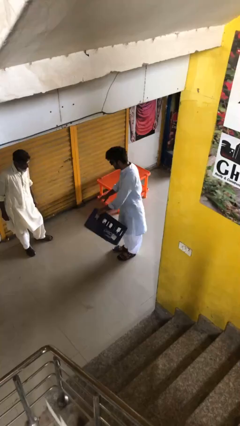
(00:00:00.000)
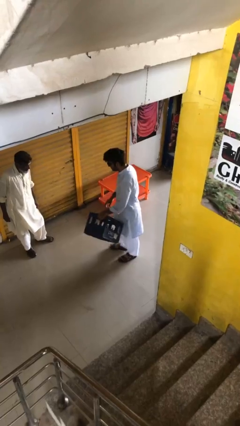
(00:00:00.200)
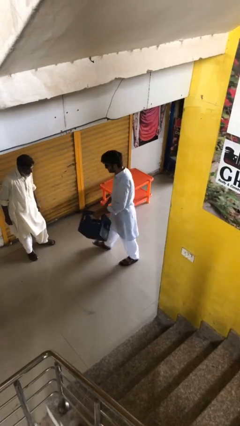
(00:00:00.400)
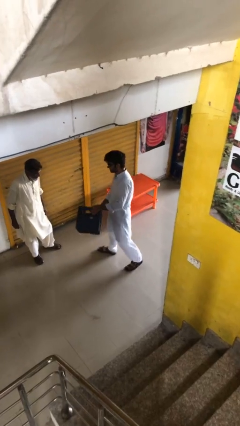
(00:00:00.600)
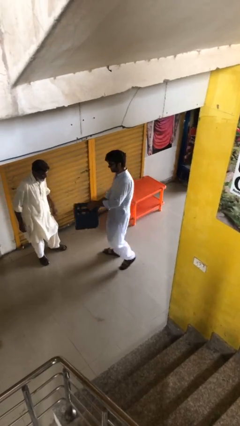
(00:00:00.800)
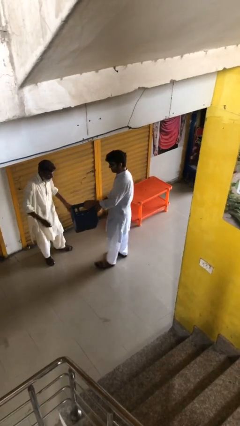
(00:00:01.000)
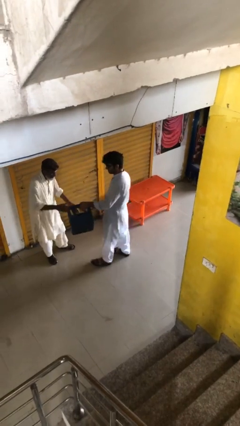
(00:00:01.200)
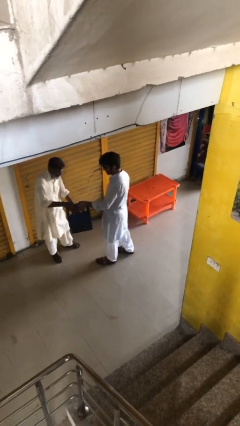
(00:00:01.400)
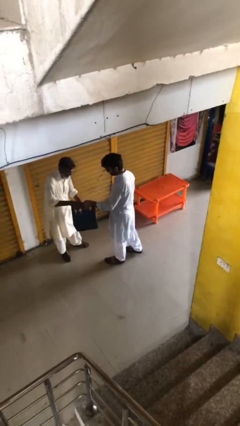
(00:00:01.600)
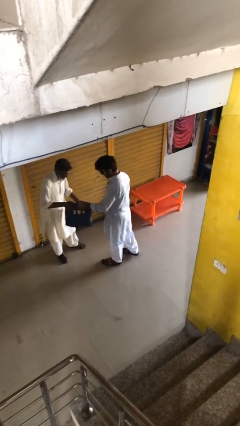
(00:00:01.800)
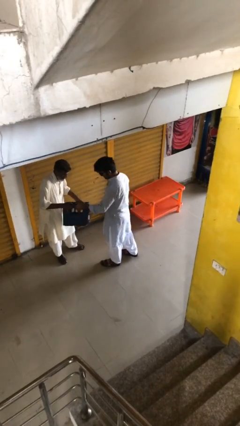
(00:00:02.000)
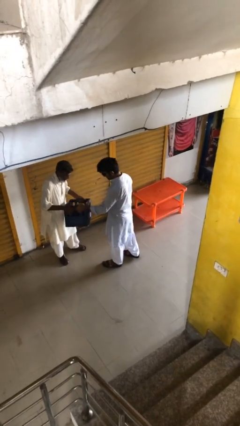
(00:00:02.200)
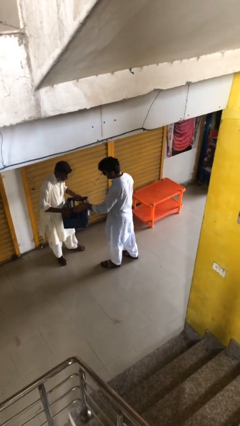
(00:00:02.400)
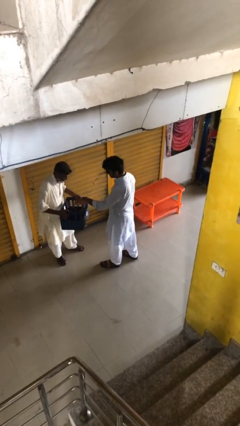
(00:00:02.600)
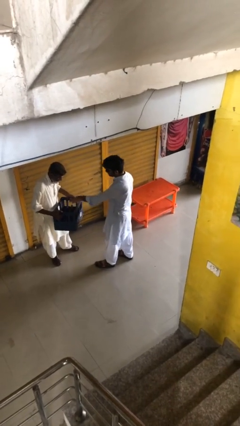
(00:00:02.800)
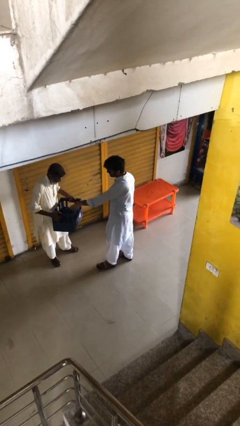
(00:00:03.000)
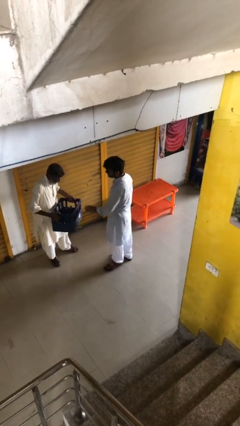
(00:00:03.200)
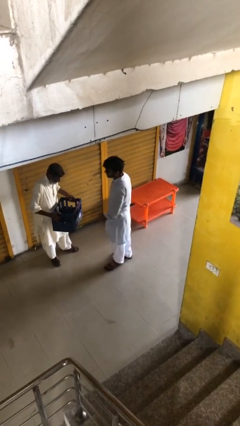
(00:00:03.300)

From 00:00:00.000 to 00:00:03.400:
person transfers object to person

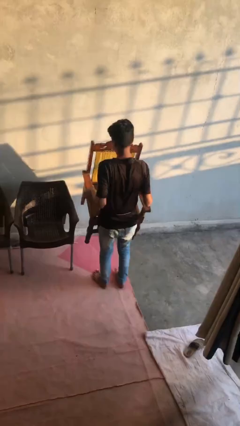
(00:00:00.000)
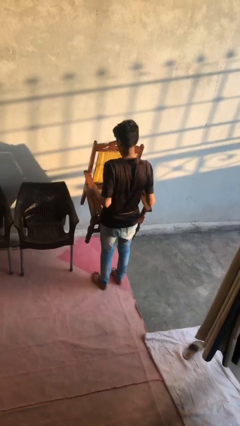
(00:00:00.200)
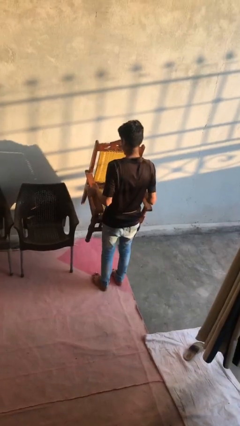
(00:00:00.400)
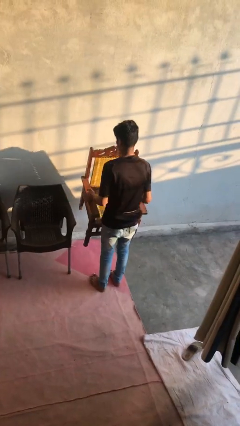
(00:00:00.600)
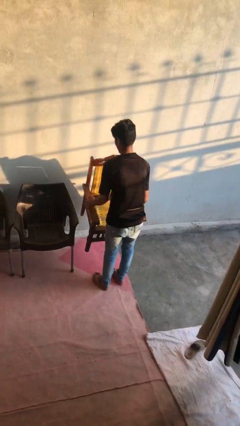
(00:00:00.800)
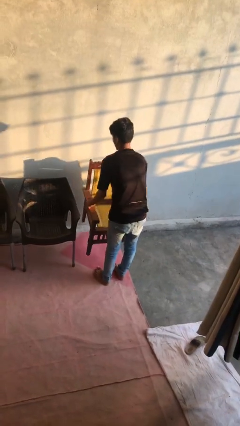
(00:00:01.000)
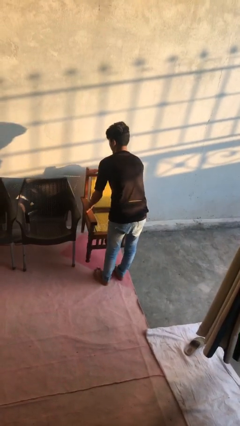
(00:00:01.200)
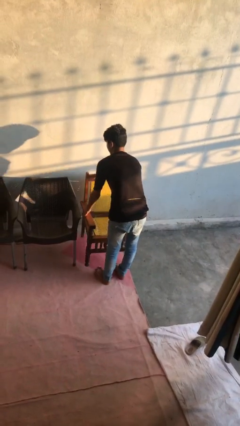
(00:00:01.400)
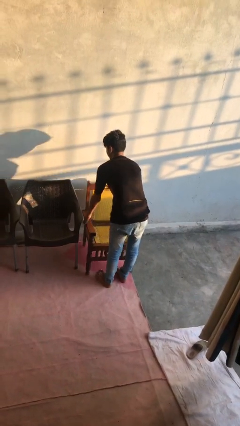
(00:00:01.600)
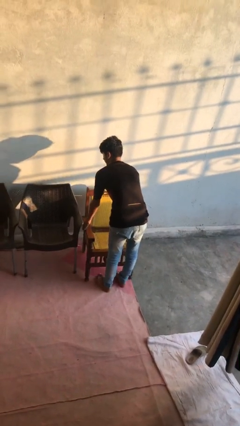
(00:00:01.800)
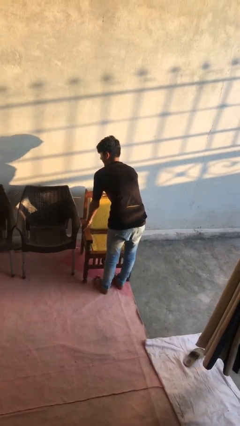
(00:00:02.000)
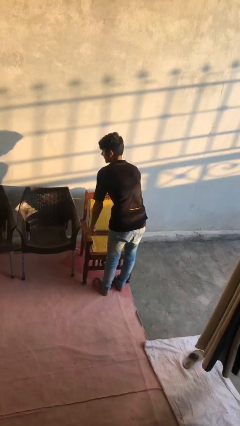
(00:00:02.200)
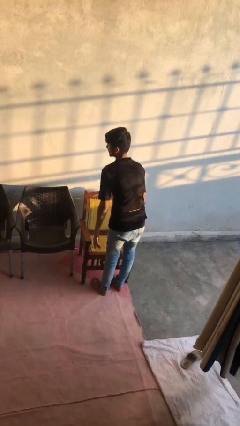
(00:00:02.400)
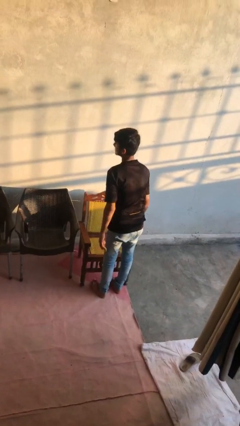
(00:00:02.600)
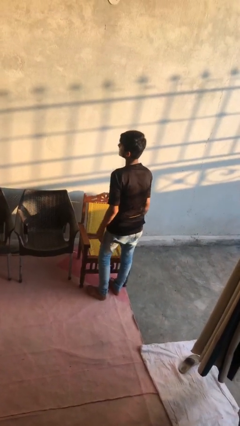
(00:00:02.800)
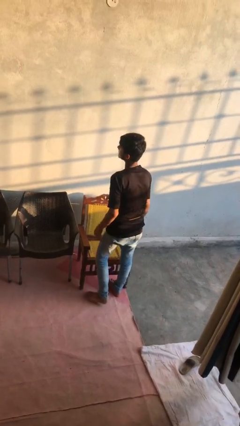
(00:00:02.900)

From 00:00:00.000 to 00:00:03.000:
person puts down object on floor

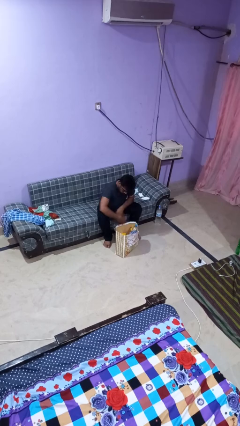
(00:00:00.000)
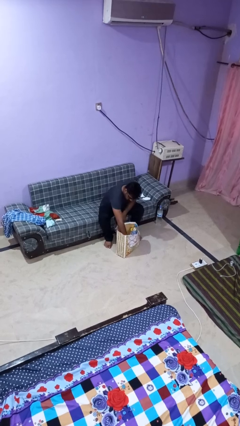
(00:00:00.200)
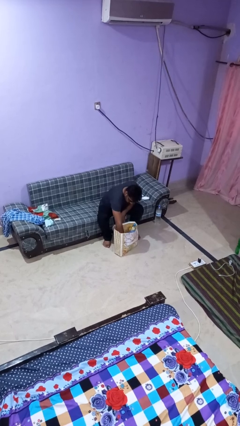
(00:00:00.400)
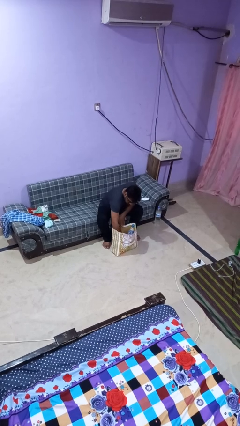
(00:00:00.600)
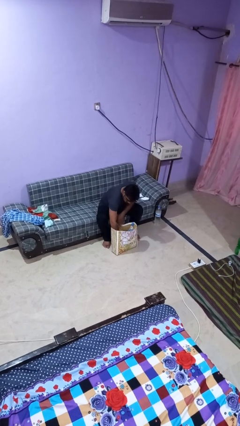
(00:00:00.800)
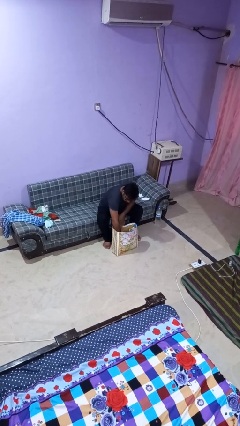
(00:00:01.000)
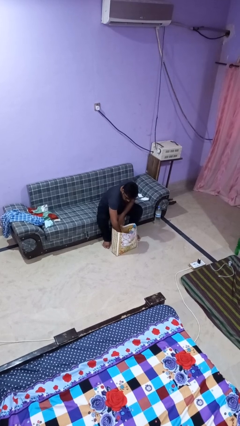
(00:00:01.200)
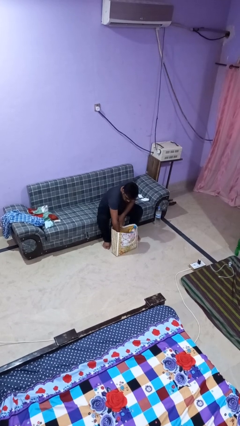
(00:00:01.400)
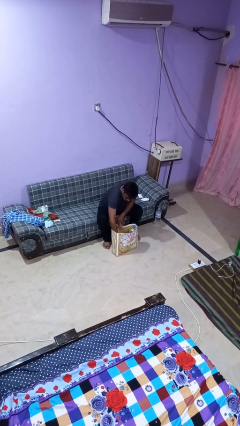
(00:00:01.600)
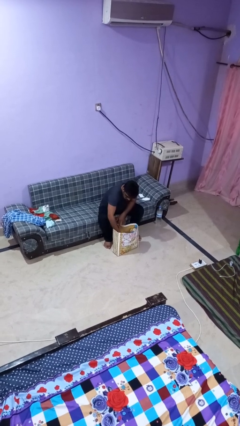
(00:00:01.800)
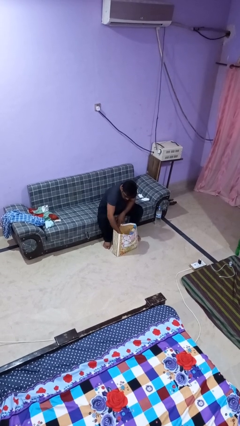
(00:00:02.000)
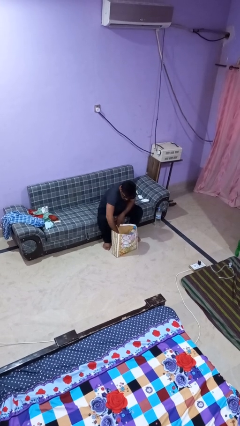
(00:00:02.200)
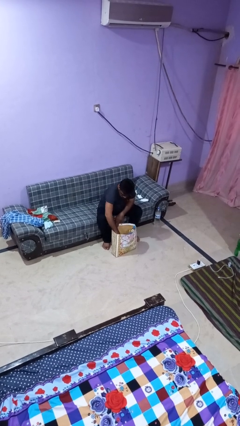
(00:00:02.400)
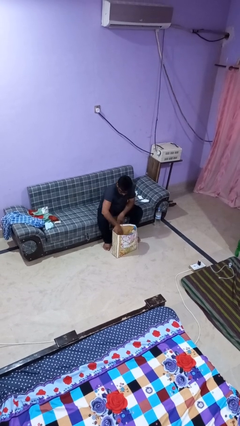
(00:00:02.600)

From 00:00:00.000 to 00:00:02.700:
person searches in bag

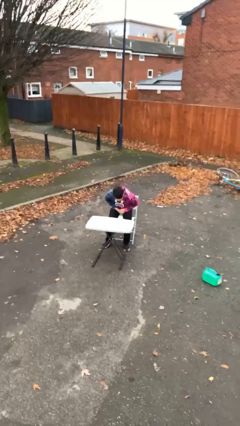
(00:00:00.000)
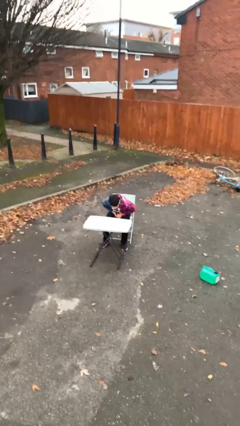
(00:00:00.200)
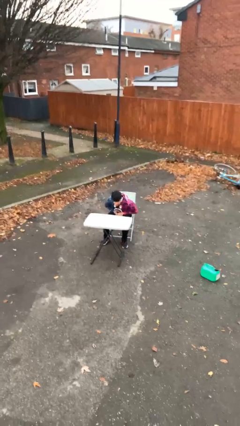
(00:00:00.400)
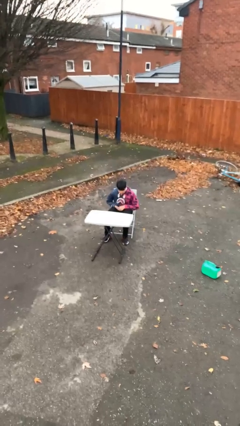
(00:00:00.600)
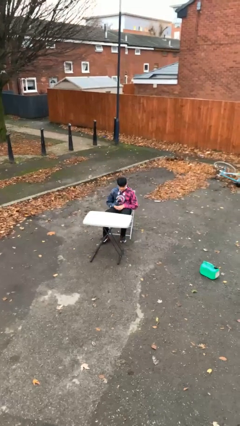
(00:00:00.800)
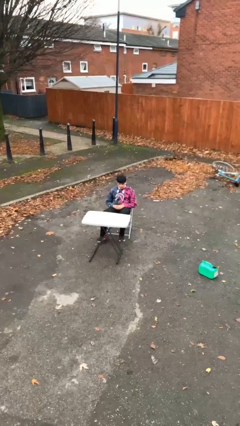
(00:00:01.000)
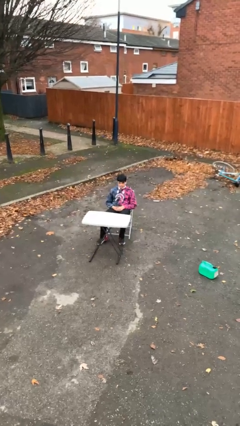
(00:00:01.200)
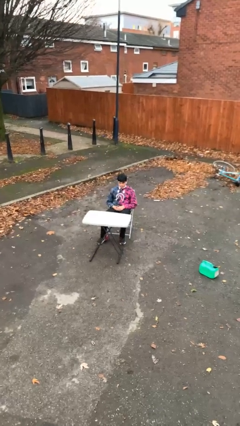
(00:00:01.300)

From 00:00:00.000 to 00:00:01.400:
person sits down

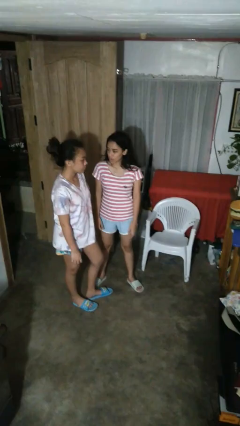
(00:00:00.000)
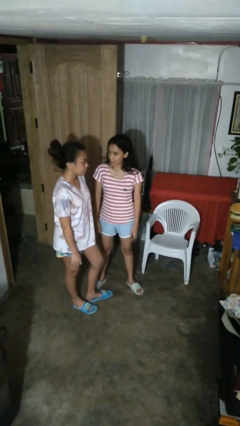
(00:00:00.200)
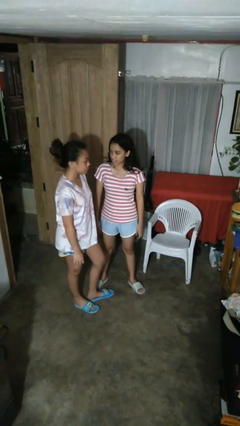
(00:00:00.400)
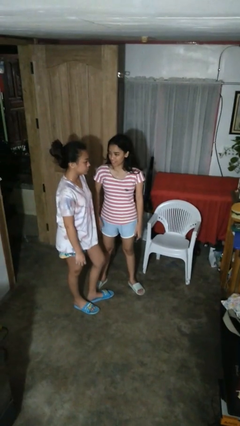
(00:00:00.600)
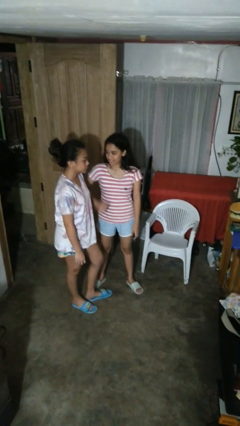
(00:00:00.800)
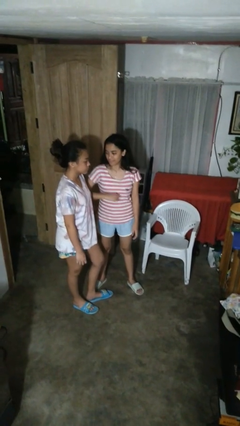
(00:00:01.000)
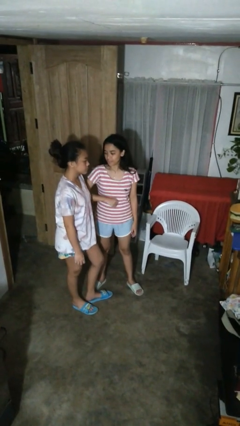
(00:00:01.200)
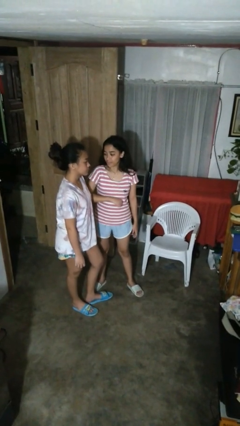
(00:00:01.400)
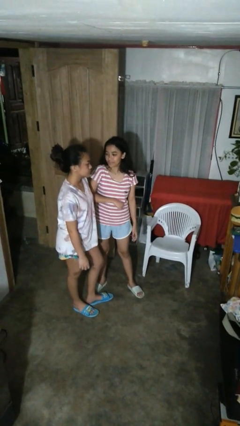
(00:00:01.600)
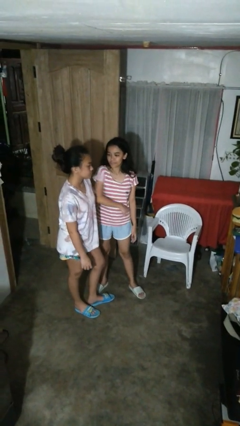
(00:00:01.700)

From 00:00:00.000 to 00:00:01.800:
person nudges person with elbow

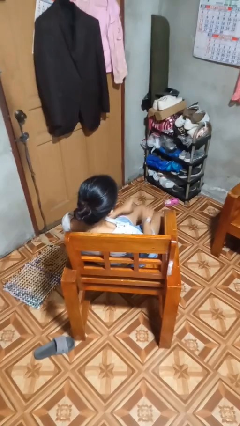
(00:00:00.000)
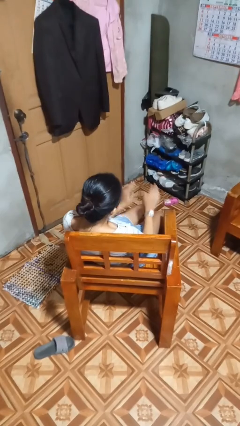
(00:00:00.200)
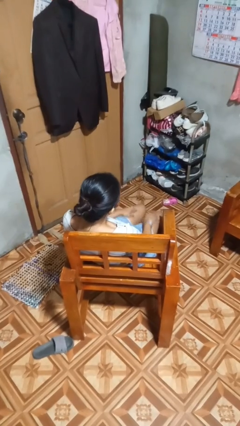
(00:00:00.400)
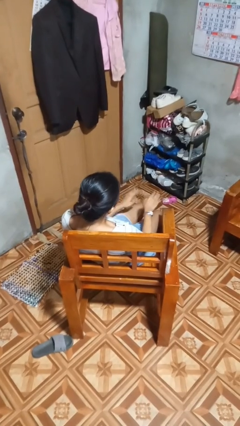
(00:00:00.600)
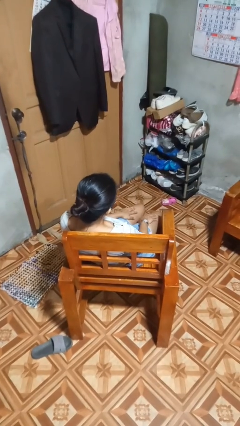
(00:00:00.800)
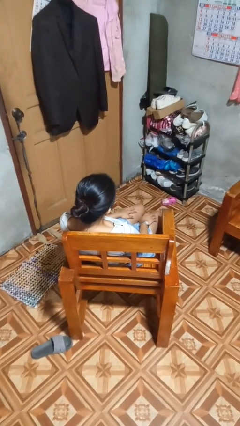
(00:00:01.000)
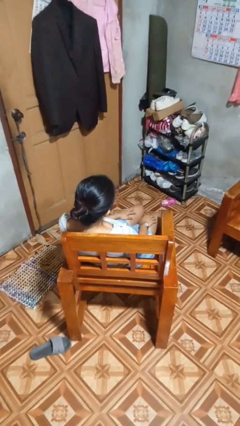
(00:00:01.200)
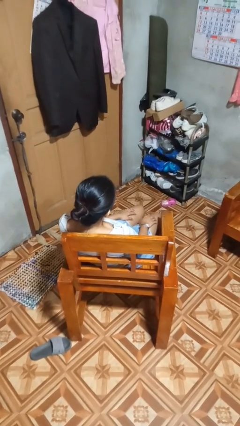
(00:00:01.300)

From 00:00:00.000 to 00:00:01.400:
person slaps hands on thighs

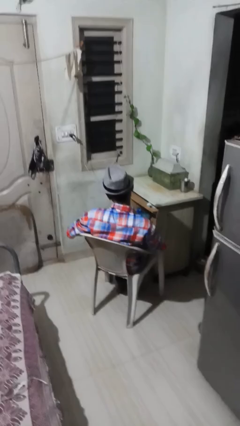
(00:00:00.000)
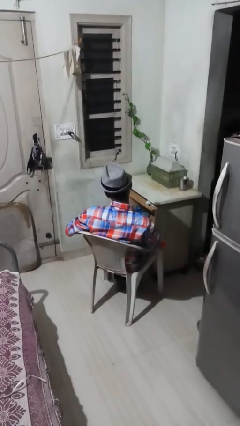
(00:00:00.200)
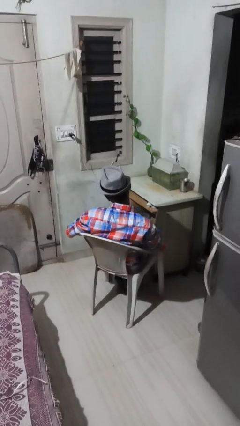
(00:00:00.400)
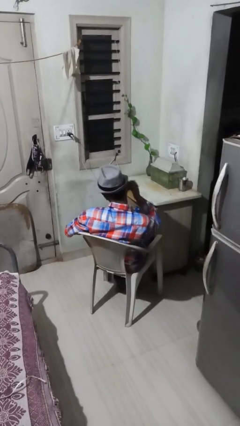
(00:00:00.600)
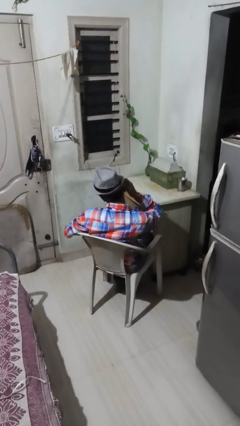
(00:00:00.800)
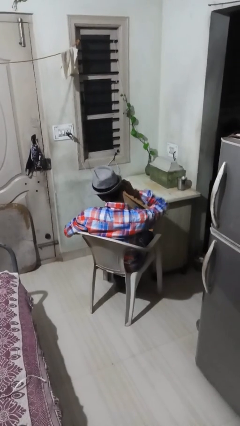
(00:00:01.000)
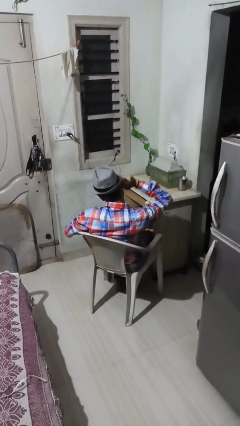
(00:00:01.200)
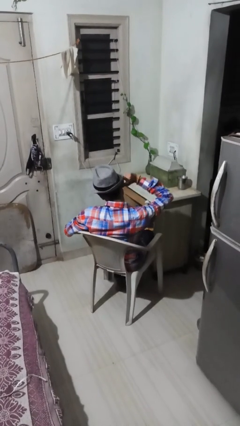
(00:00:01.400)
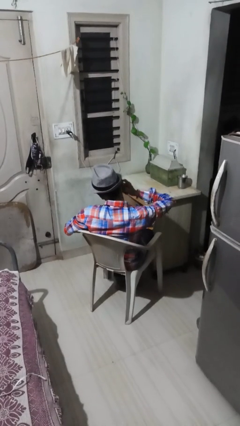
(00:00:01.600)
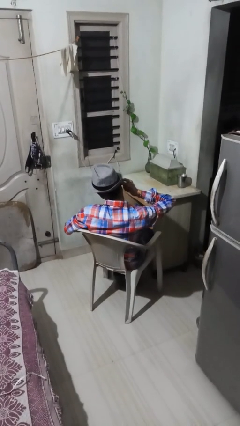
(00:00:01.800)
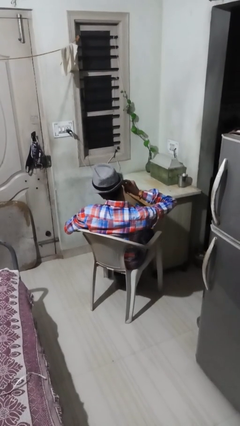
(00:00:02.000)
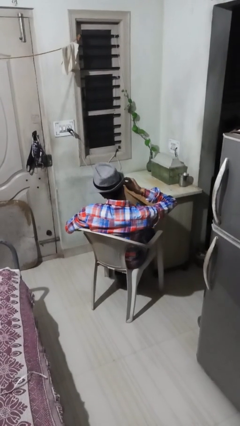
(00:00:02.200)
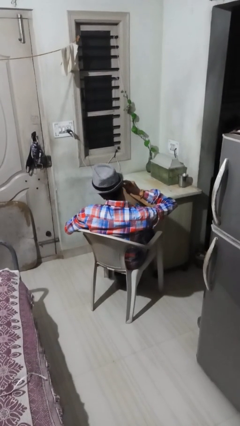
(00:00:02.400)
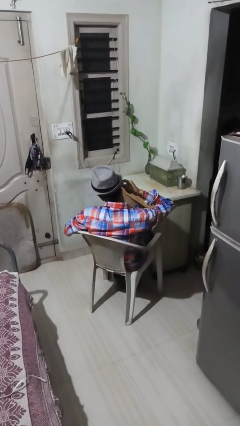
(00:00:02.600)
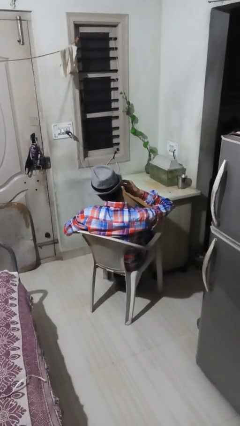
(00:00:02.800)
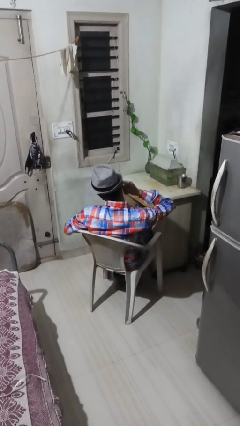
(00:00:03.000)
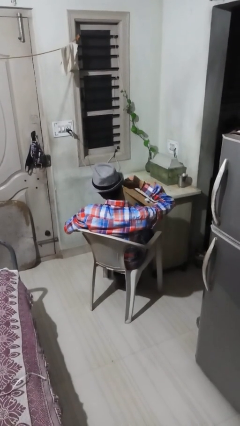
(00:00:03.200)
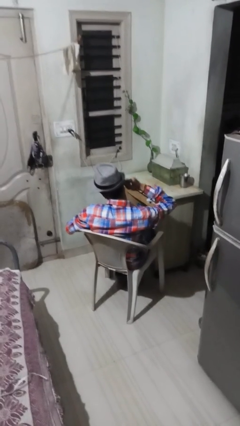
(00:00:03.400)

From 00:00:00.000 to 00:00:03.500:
person puts fingers in ear
